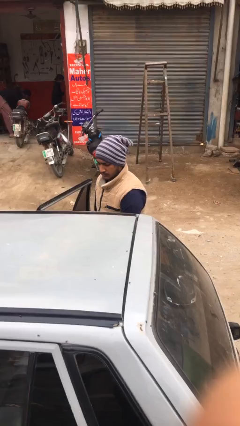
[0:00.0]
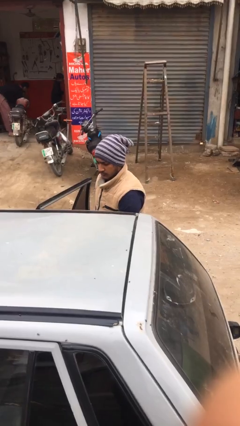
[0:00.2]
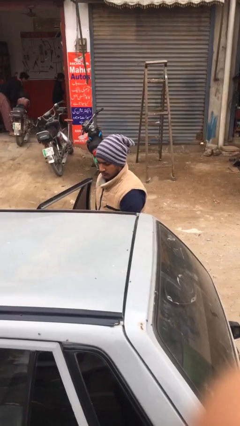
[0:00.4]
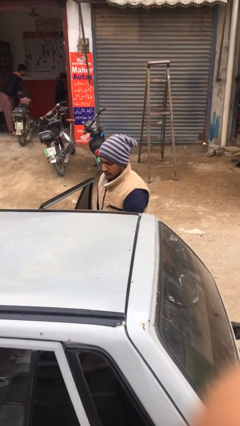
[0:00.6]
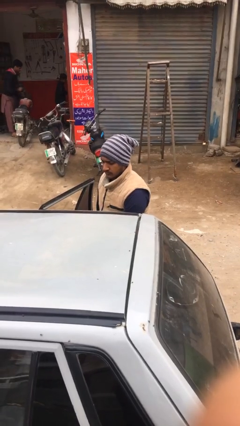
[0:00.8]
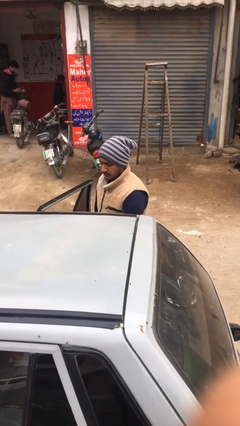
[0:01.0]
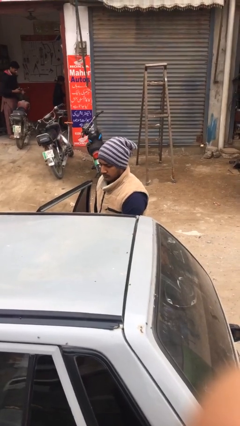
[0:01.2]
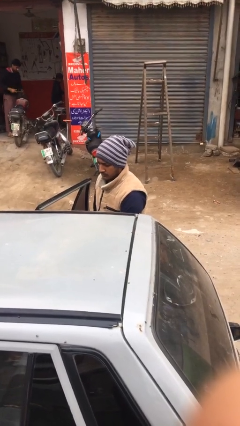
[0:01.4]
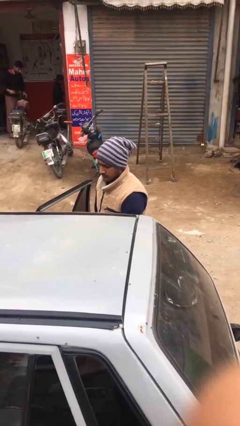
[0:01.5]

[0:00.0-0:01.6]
person loads car

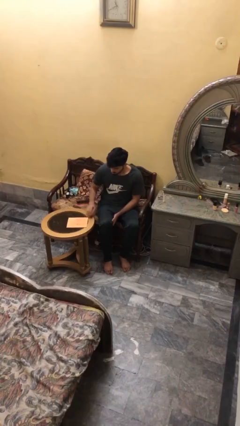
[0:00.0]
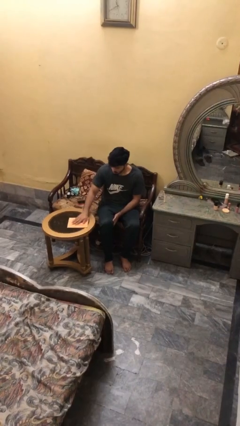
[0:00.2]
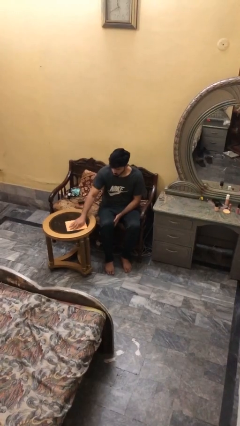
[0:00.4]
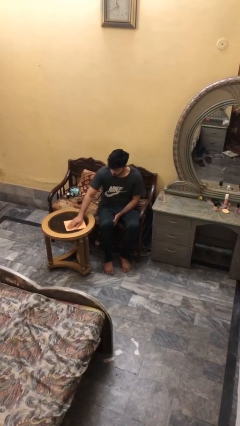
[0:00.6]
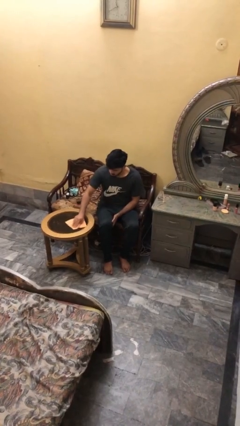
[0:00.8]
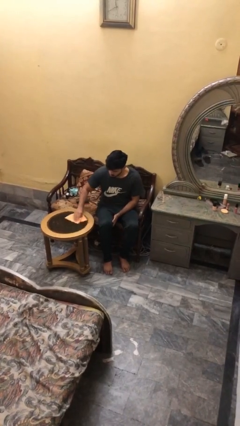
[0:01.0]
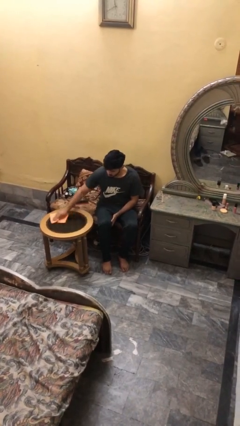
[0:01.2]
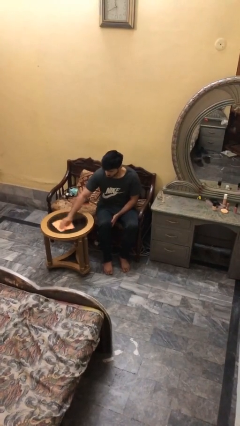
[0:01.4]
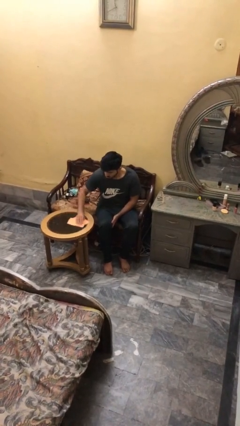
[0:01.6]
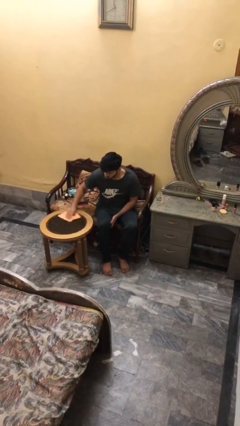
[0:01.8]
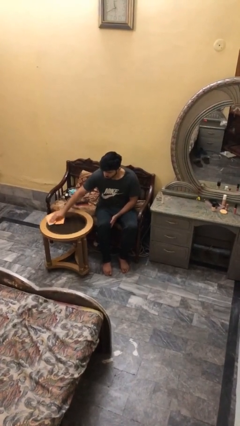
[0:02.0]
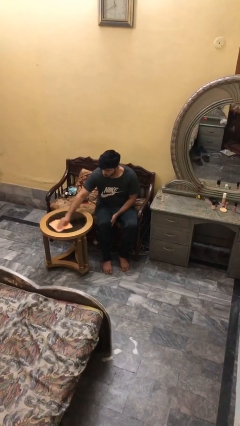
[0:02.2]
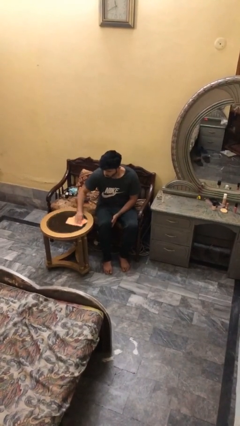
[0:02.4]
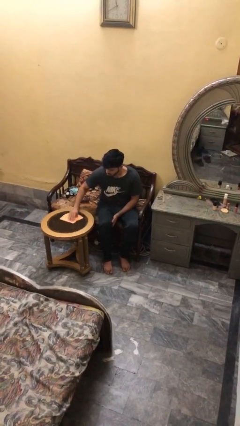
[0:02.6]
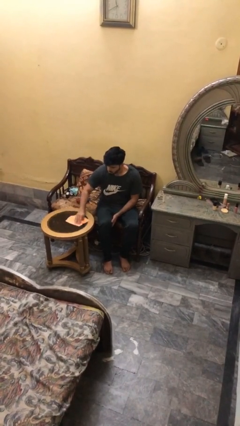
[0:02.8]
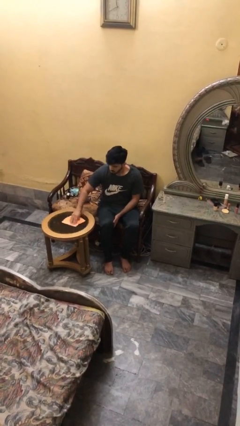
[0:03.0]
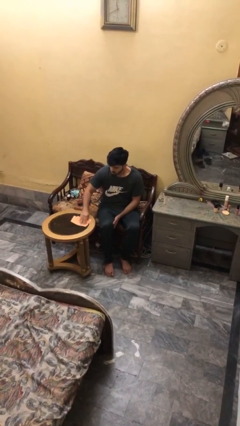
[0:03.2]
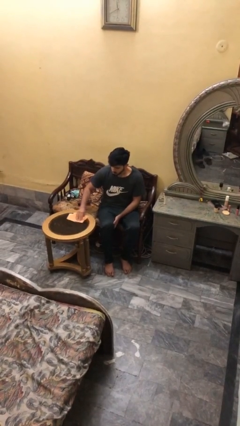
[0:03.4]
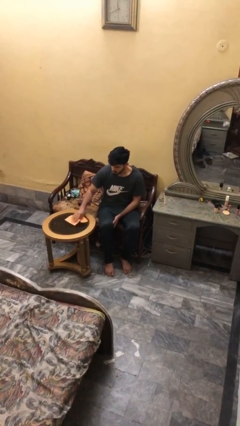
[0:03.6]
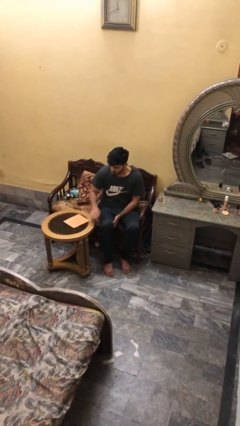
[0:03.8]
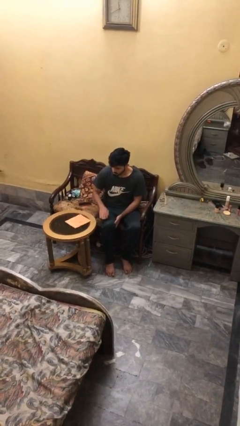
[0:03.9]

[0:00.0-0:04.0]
person cleans table with rag

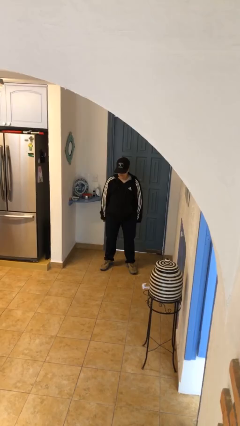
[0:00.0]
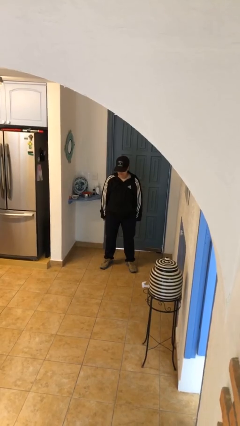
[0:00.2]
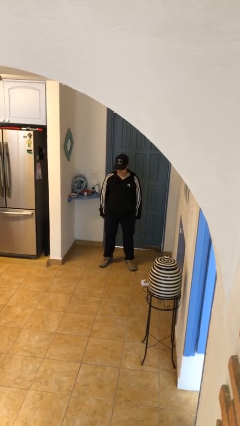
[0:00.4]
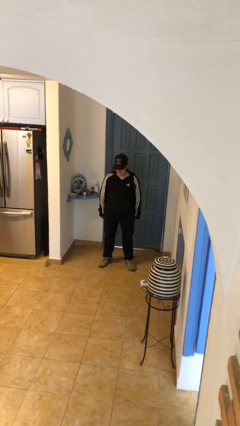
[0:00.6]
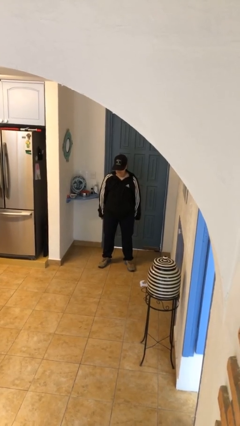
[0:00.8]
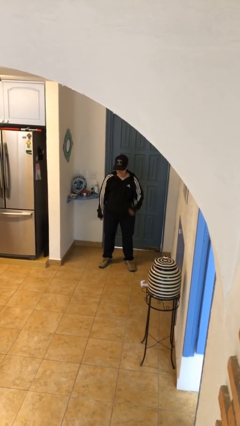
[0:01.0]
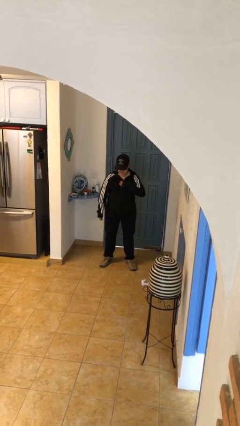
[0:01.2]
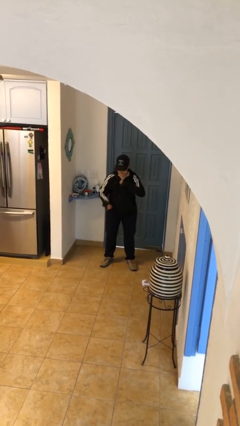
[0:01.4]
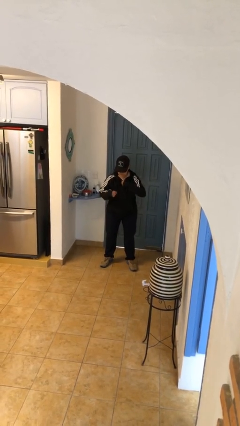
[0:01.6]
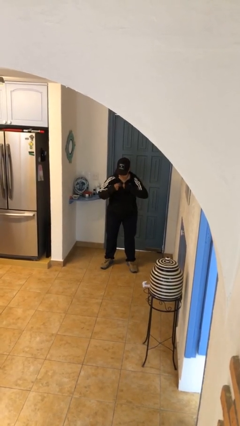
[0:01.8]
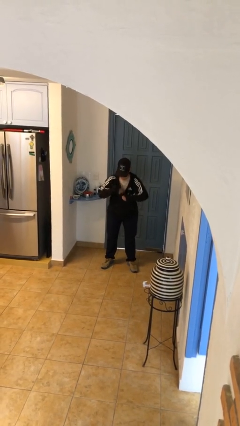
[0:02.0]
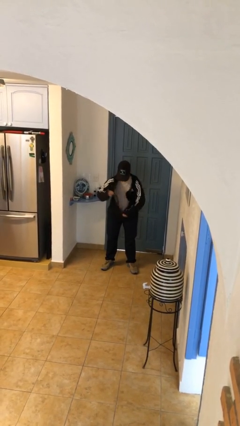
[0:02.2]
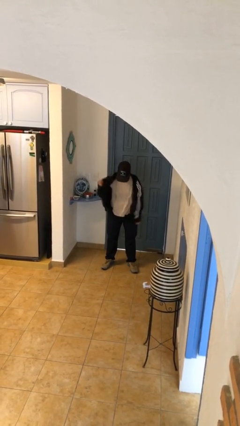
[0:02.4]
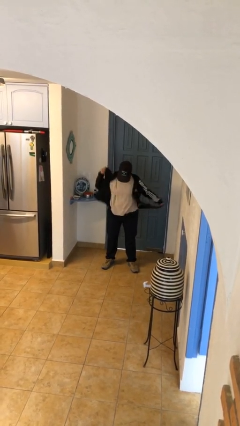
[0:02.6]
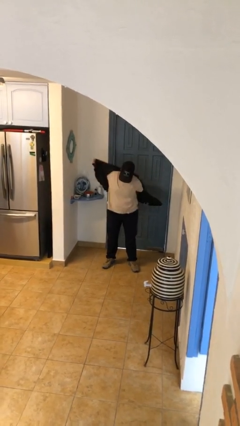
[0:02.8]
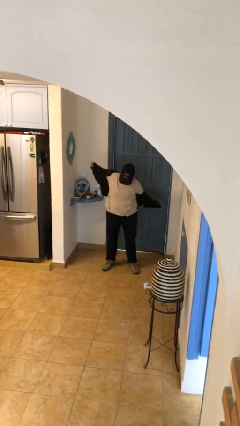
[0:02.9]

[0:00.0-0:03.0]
person unzips jacket

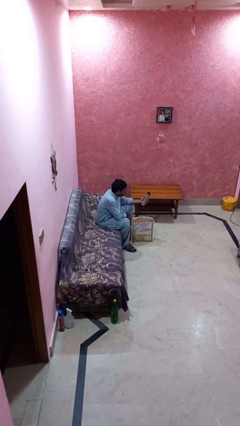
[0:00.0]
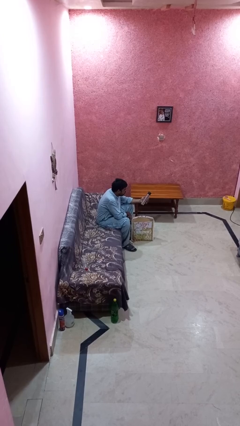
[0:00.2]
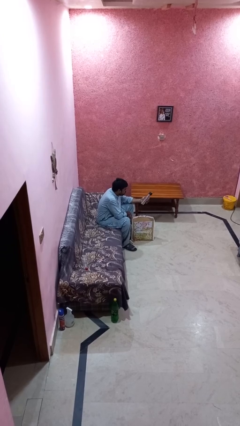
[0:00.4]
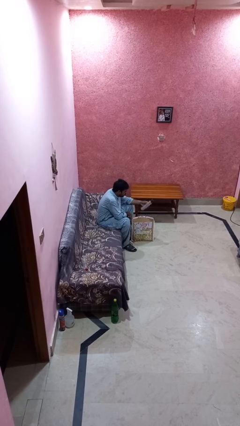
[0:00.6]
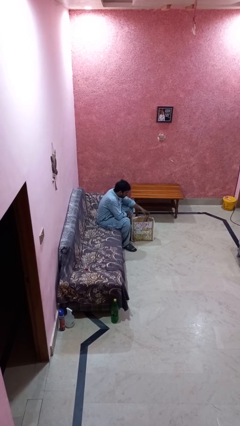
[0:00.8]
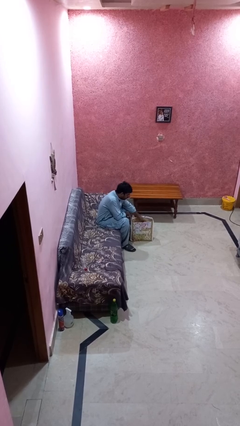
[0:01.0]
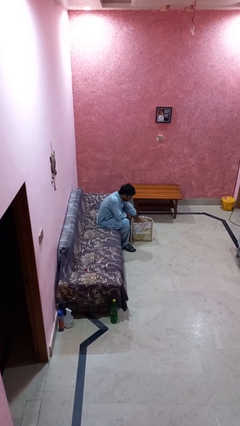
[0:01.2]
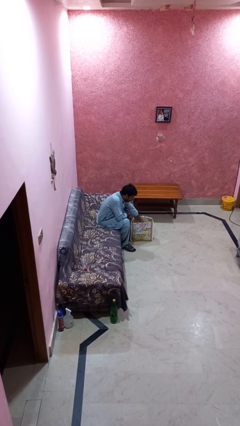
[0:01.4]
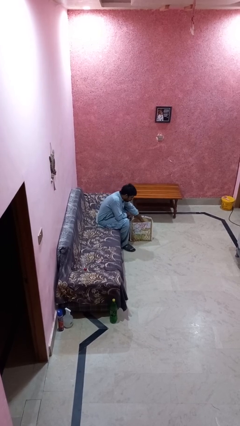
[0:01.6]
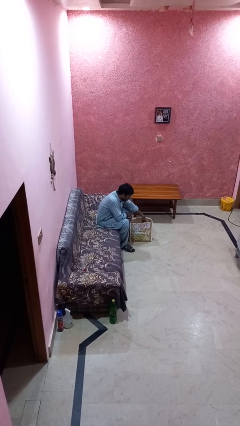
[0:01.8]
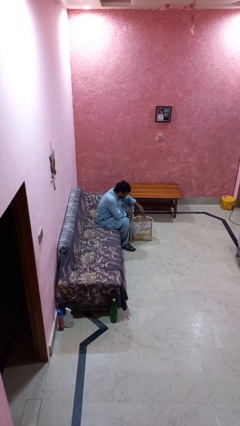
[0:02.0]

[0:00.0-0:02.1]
person puts object into bag

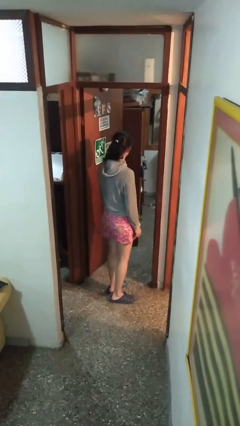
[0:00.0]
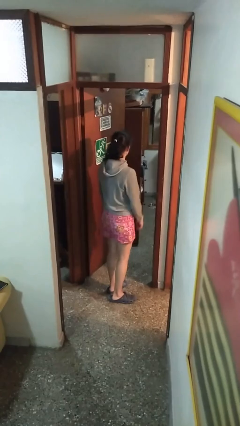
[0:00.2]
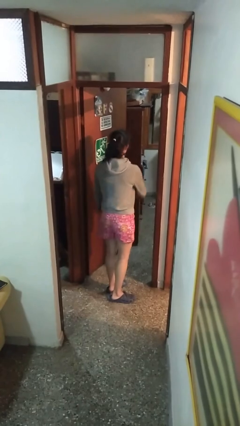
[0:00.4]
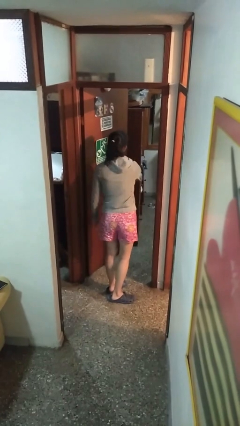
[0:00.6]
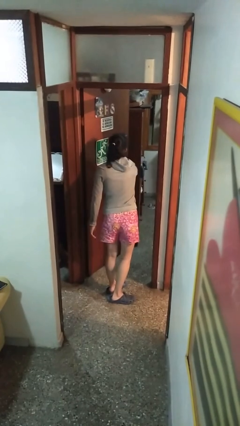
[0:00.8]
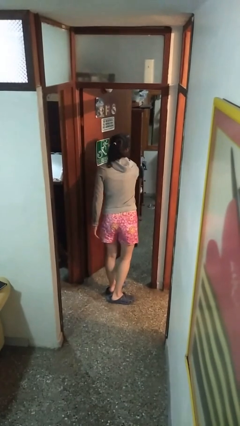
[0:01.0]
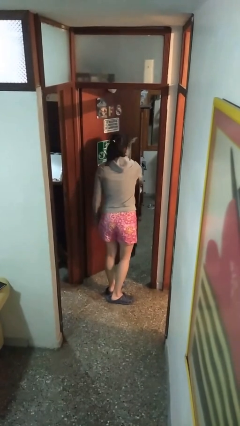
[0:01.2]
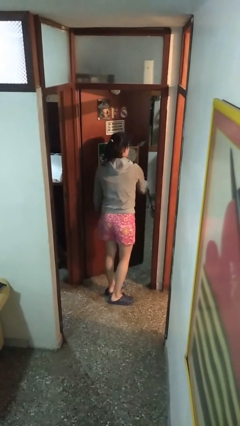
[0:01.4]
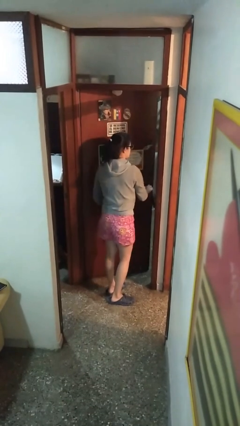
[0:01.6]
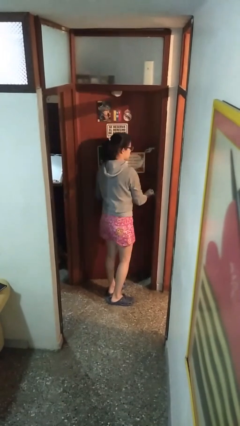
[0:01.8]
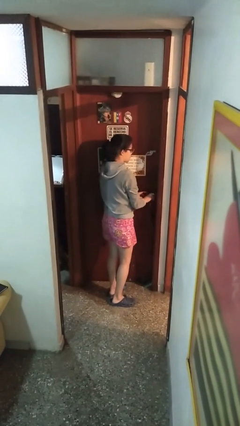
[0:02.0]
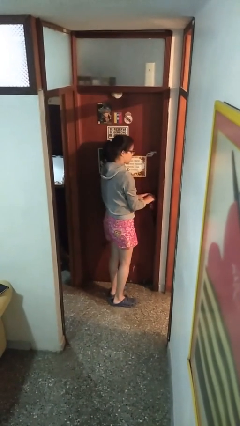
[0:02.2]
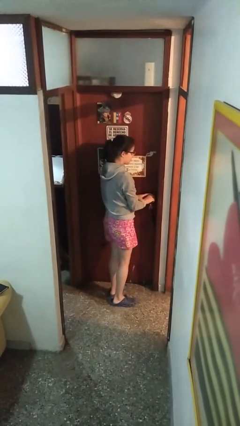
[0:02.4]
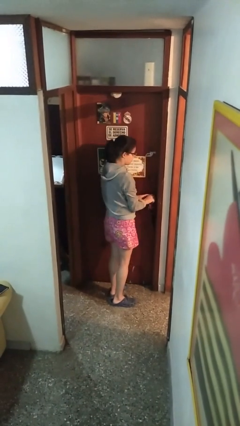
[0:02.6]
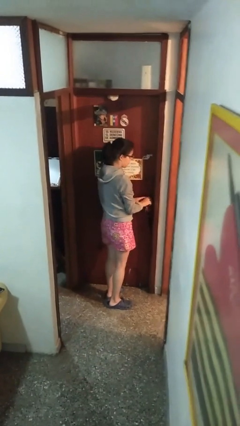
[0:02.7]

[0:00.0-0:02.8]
person closes facility door

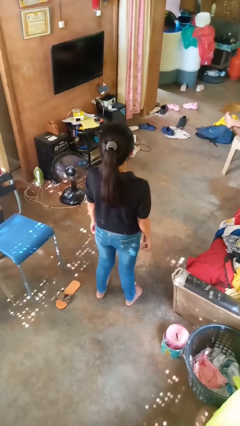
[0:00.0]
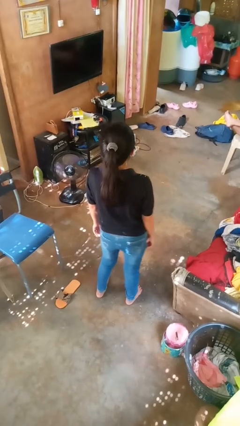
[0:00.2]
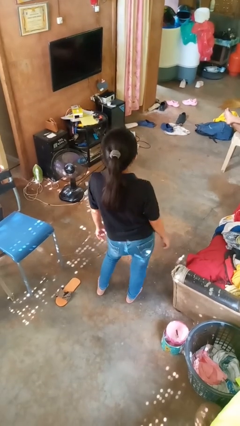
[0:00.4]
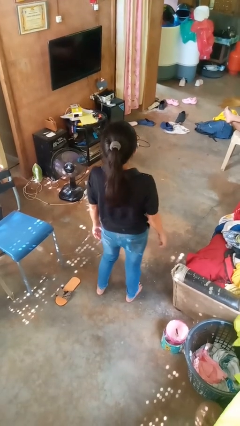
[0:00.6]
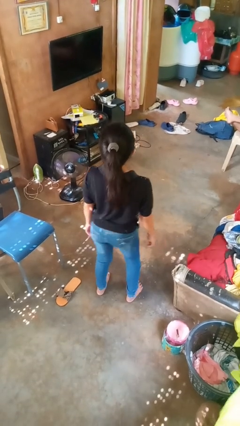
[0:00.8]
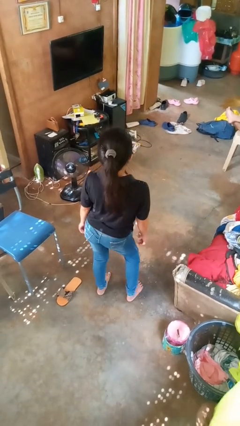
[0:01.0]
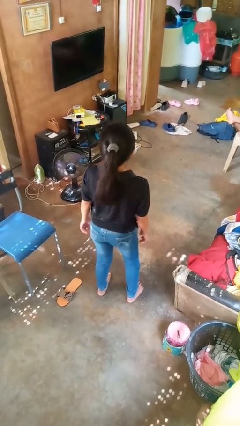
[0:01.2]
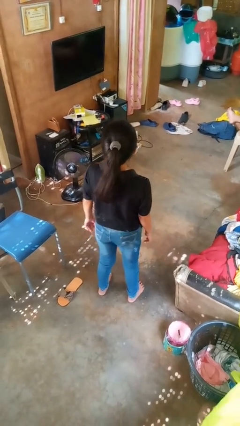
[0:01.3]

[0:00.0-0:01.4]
person wiggles hips

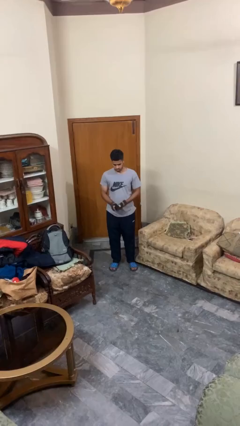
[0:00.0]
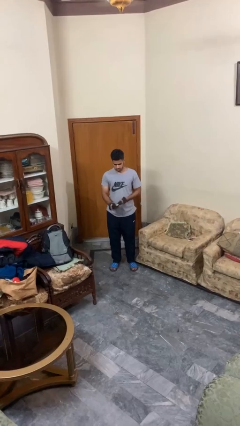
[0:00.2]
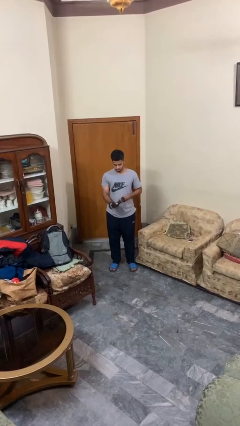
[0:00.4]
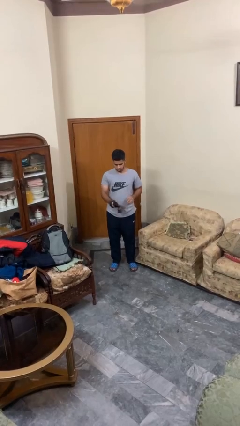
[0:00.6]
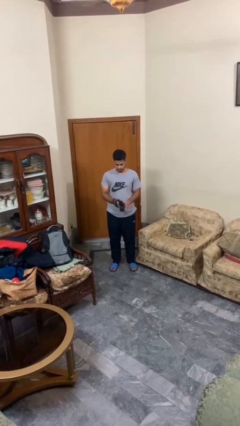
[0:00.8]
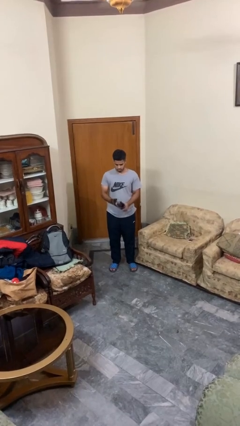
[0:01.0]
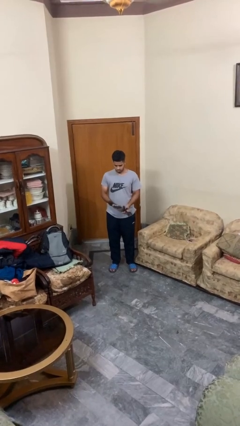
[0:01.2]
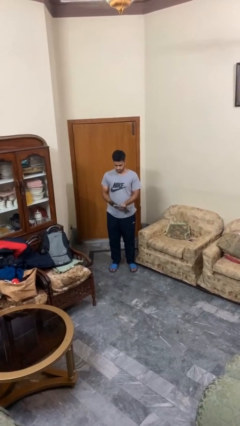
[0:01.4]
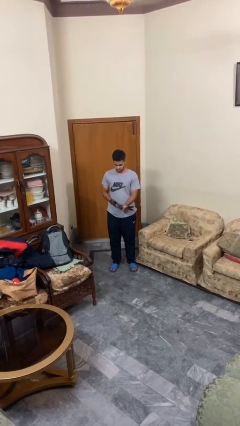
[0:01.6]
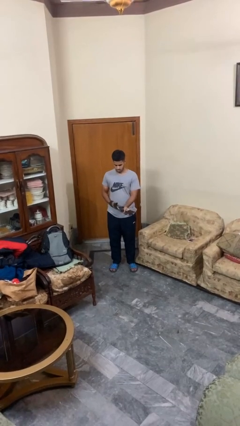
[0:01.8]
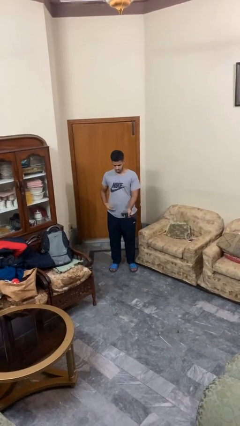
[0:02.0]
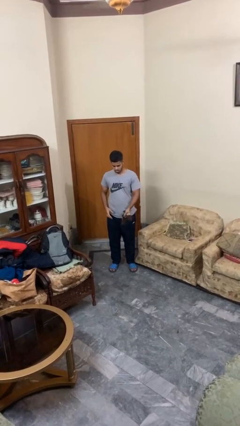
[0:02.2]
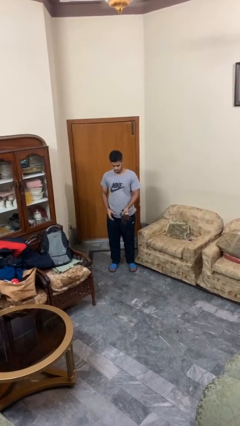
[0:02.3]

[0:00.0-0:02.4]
person takes off gloves
